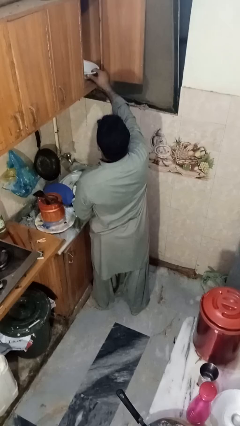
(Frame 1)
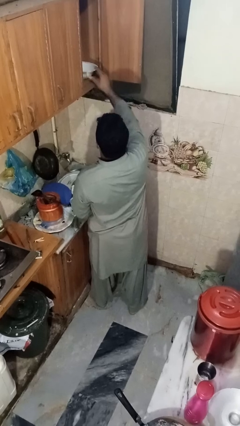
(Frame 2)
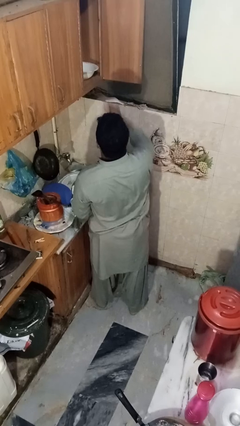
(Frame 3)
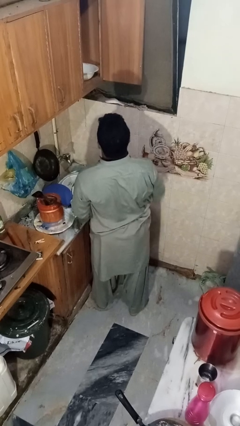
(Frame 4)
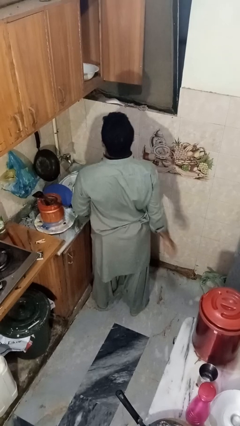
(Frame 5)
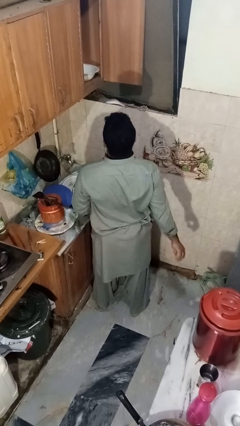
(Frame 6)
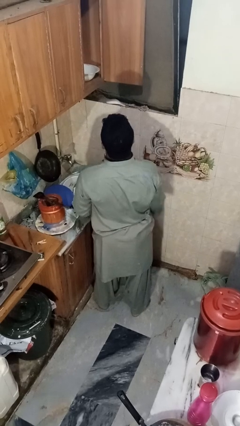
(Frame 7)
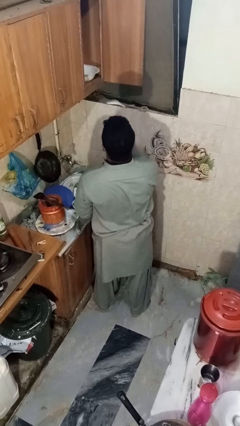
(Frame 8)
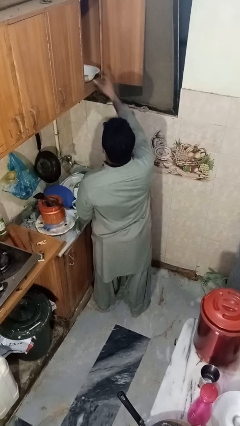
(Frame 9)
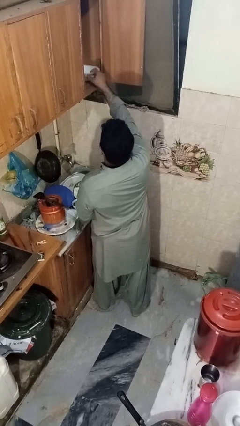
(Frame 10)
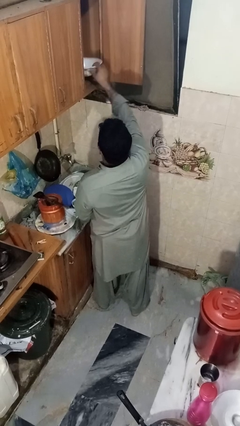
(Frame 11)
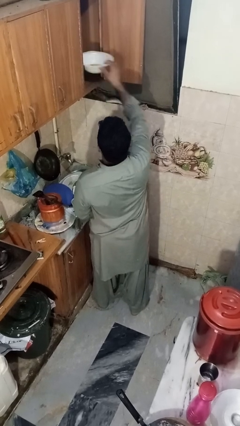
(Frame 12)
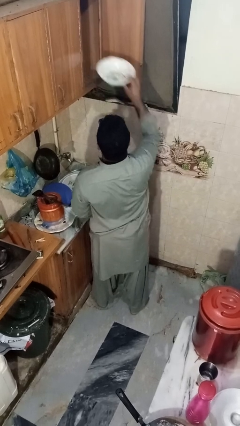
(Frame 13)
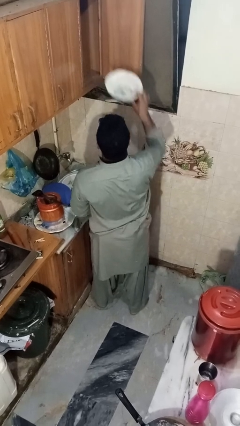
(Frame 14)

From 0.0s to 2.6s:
person takes object from cabinet

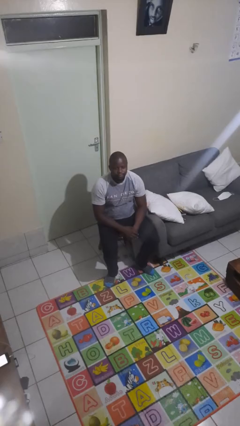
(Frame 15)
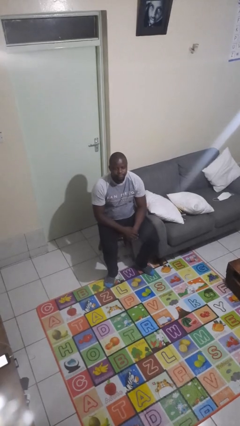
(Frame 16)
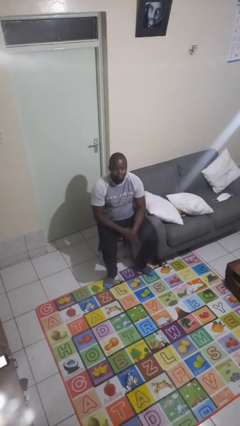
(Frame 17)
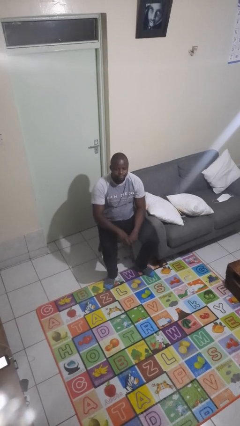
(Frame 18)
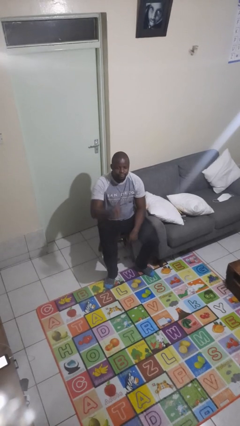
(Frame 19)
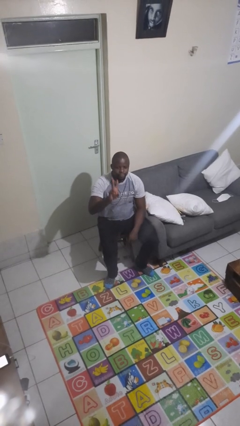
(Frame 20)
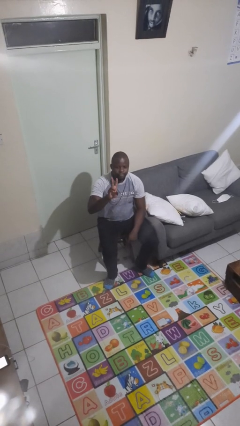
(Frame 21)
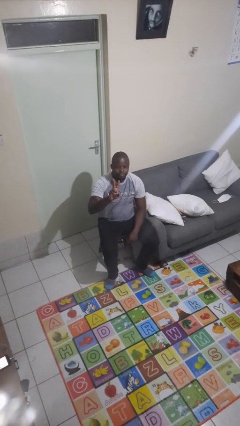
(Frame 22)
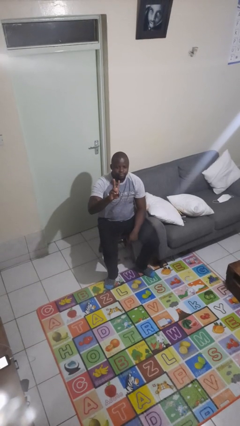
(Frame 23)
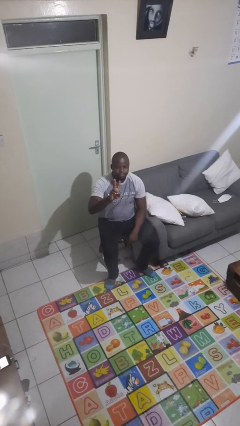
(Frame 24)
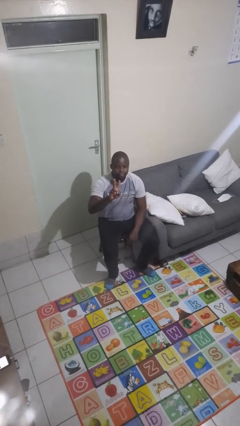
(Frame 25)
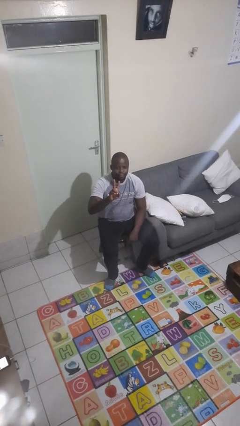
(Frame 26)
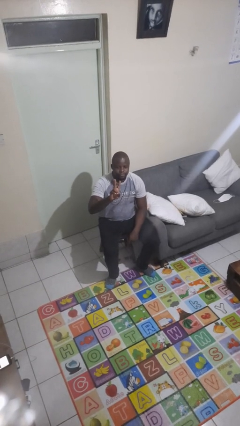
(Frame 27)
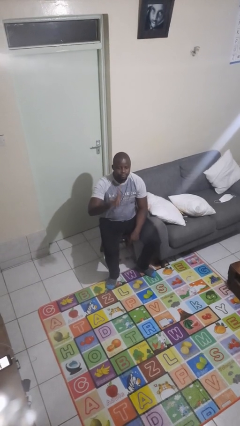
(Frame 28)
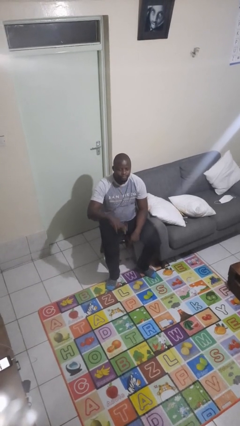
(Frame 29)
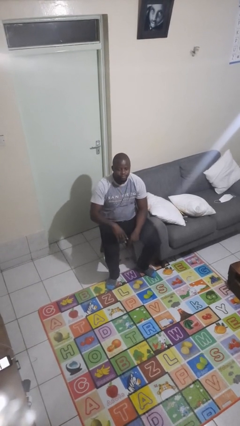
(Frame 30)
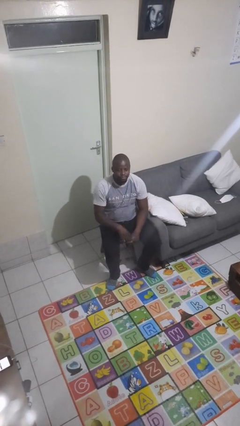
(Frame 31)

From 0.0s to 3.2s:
person gestures peace

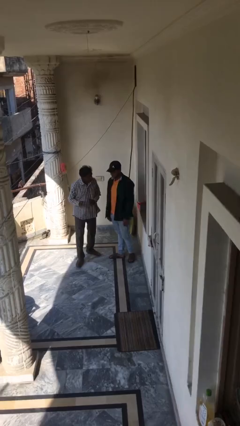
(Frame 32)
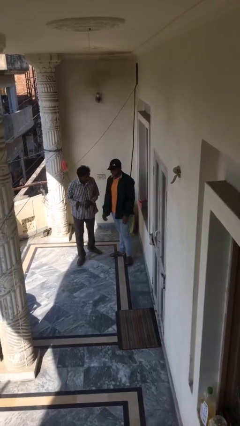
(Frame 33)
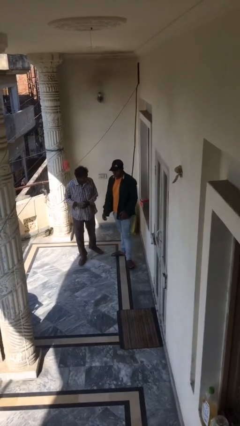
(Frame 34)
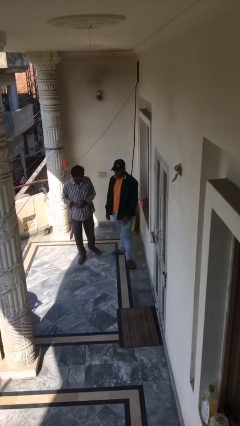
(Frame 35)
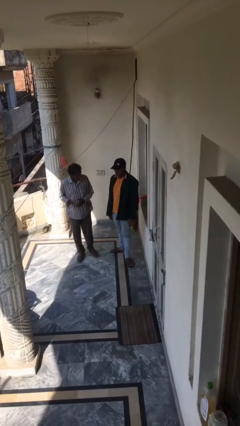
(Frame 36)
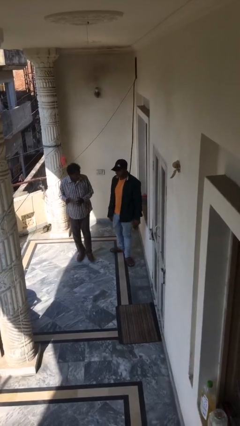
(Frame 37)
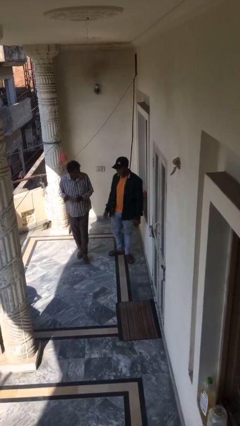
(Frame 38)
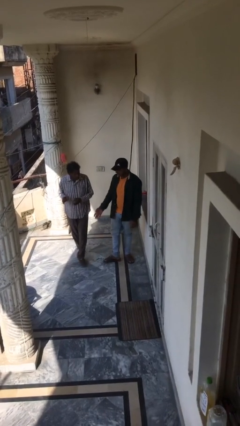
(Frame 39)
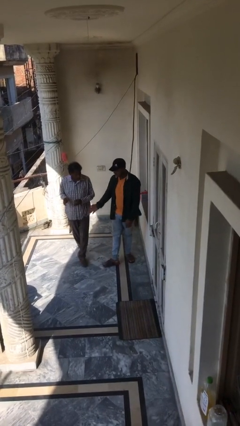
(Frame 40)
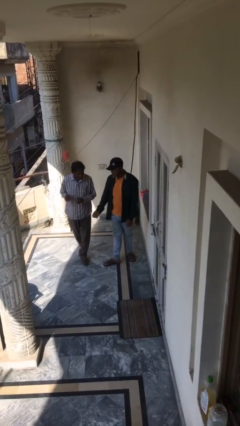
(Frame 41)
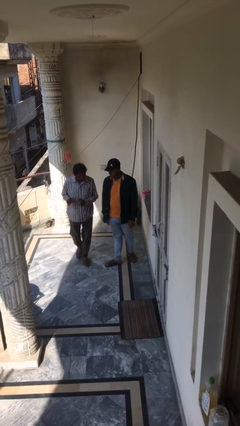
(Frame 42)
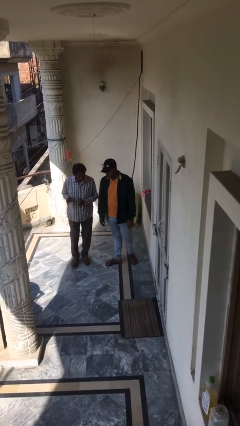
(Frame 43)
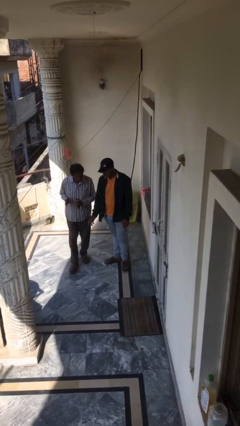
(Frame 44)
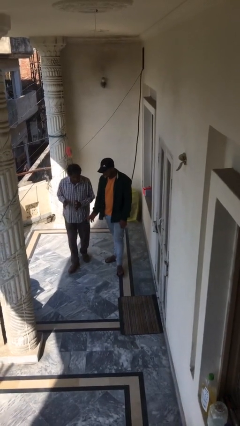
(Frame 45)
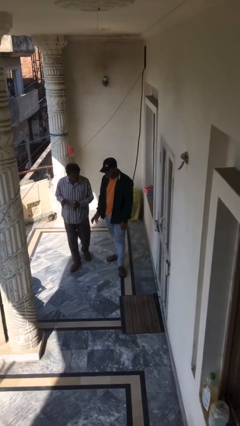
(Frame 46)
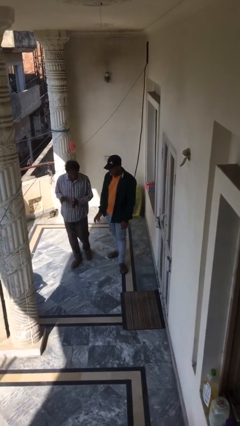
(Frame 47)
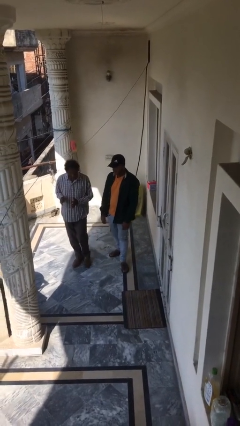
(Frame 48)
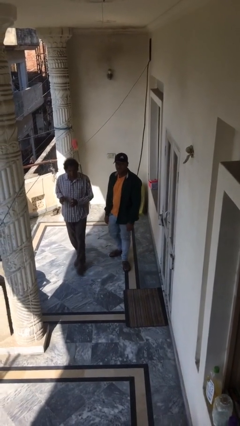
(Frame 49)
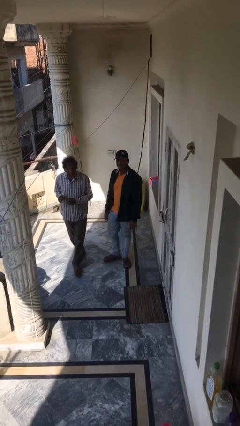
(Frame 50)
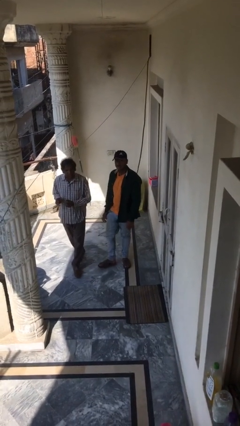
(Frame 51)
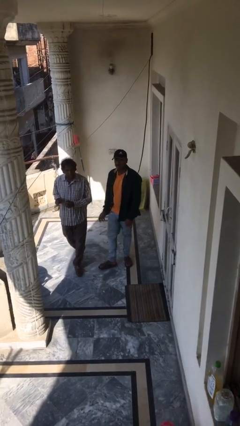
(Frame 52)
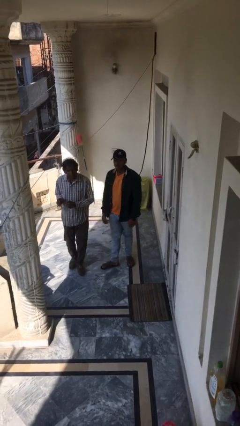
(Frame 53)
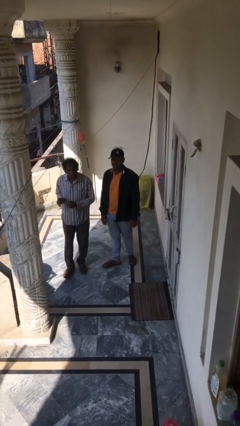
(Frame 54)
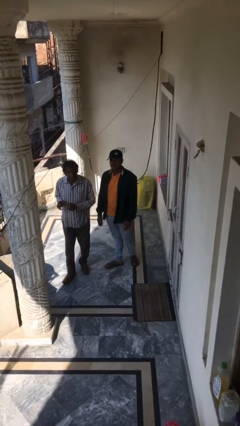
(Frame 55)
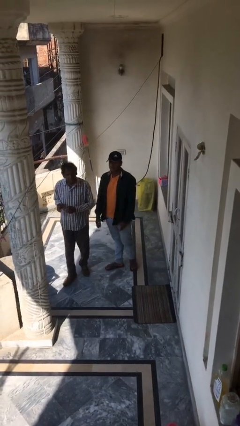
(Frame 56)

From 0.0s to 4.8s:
person talks to person

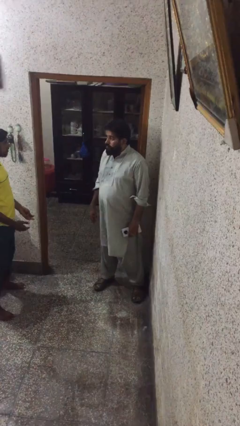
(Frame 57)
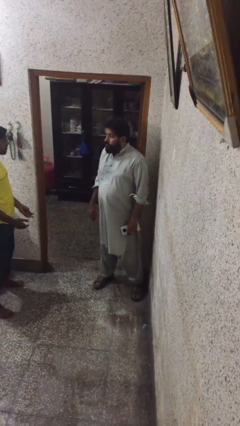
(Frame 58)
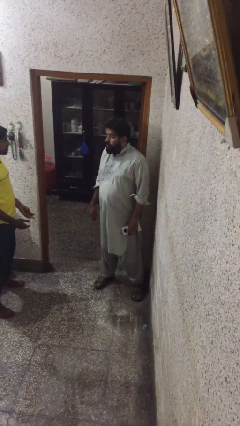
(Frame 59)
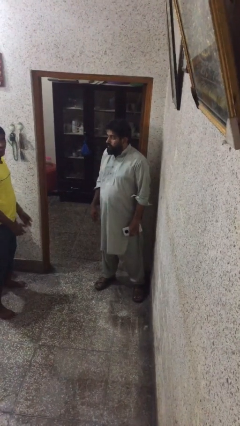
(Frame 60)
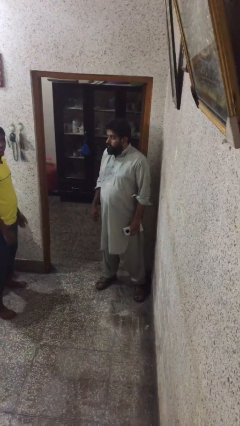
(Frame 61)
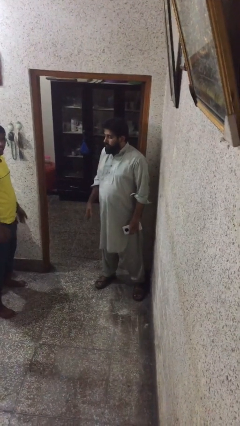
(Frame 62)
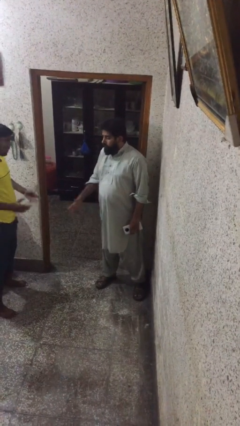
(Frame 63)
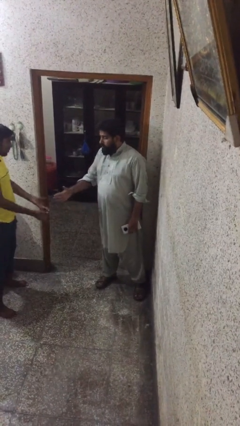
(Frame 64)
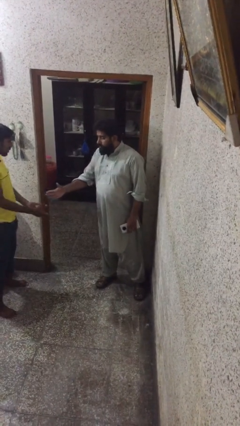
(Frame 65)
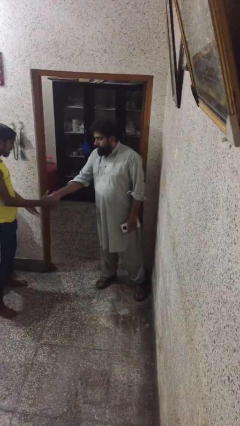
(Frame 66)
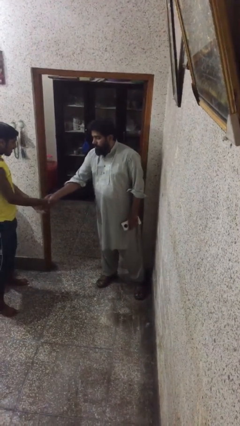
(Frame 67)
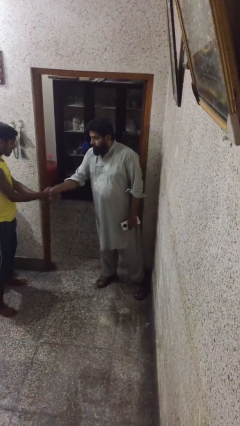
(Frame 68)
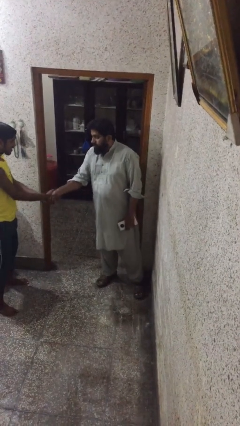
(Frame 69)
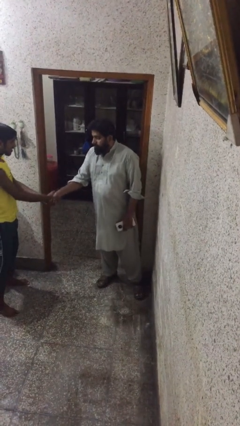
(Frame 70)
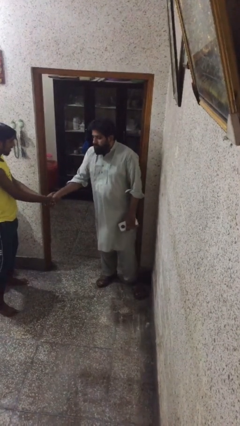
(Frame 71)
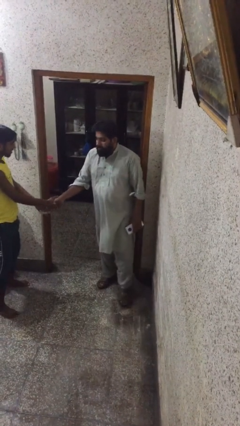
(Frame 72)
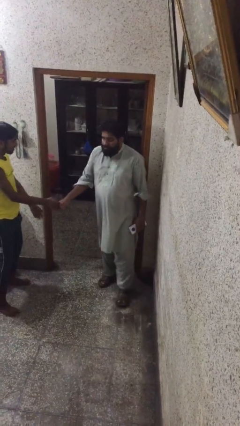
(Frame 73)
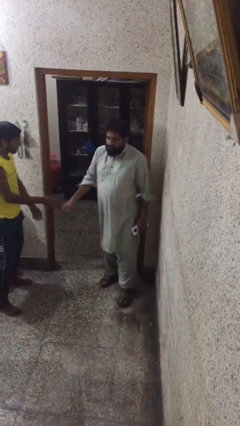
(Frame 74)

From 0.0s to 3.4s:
person shakes hand

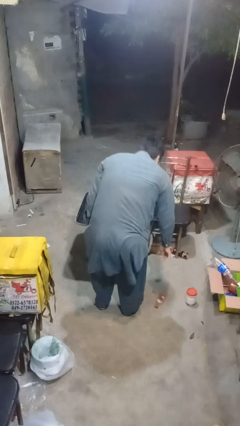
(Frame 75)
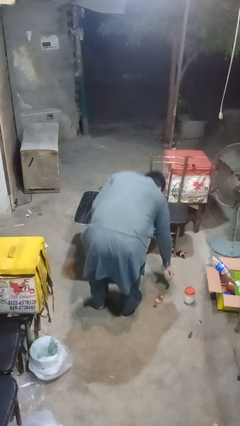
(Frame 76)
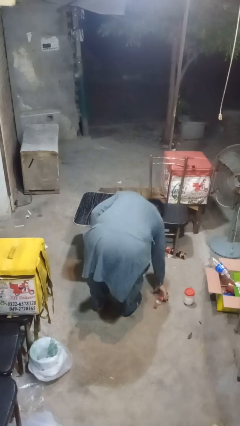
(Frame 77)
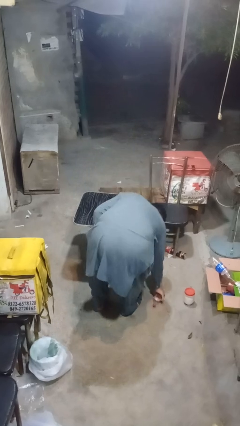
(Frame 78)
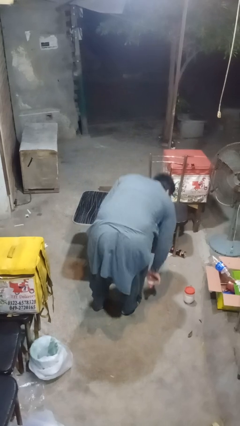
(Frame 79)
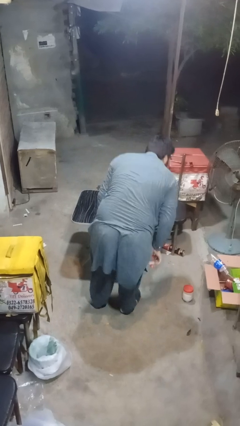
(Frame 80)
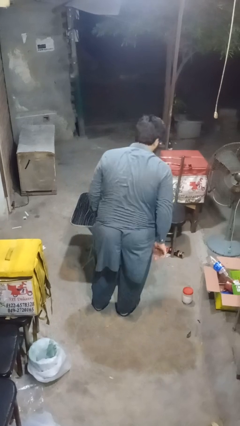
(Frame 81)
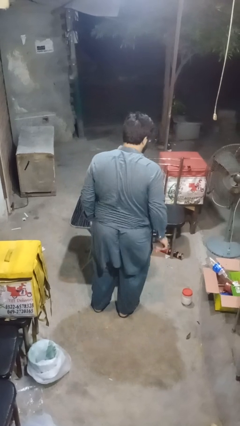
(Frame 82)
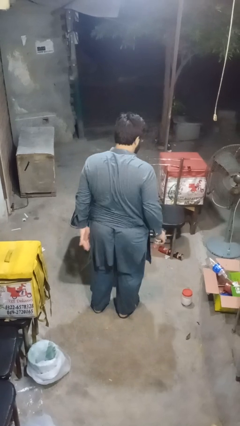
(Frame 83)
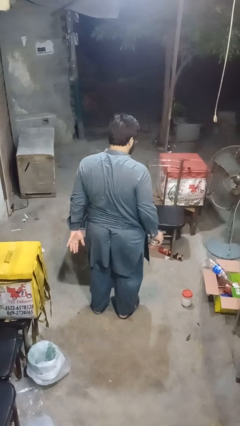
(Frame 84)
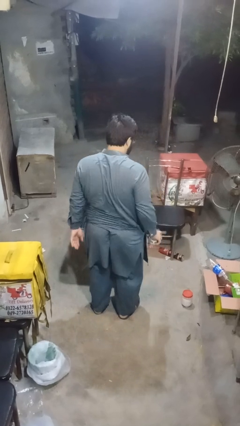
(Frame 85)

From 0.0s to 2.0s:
person picks up object from floor

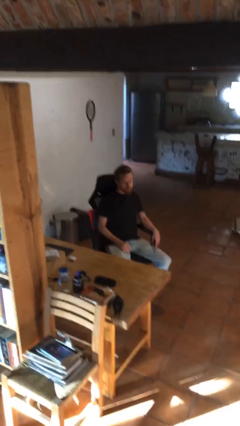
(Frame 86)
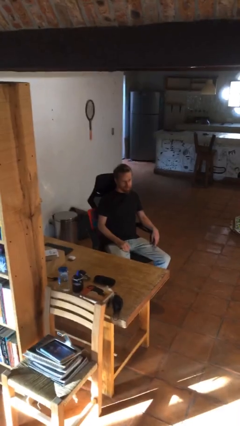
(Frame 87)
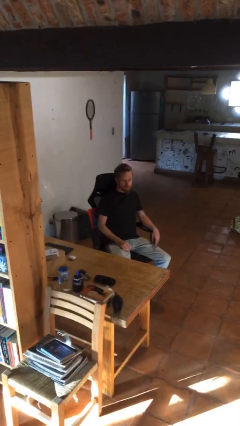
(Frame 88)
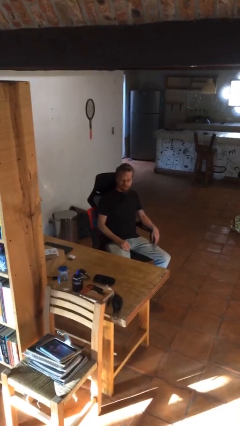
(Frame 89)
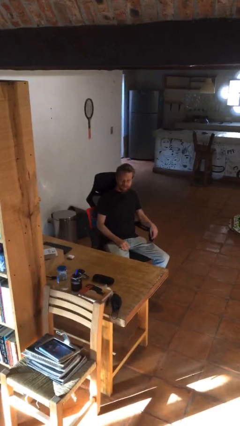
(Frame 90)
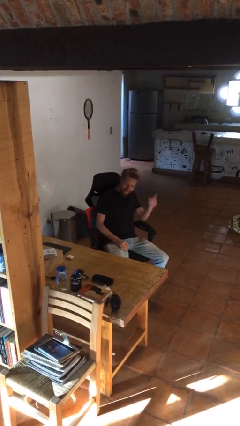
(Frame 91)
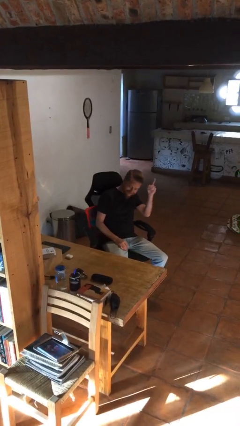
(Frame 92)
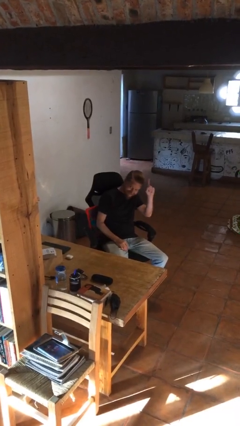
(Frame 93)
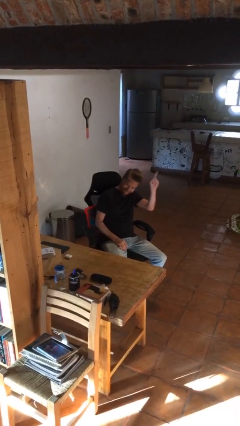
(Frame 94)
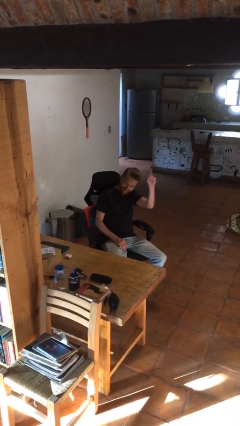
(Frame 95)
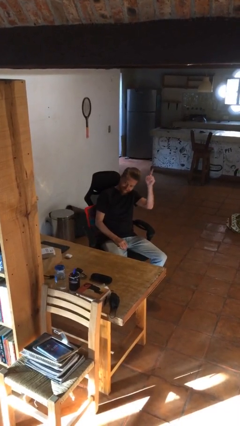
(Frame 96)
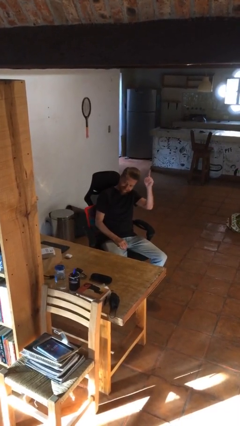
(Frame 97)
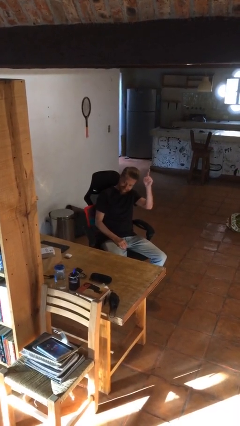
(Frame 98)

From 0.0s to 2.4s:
person gestures raise hand
